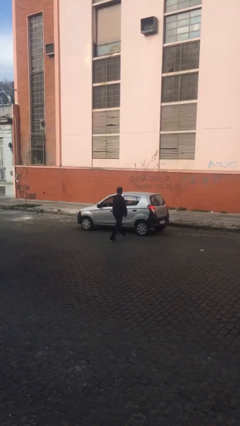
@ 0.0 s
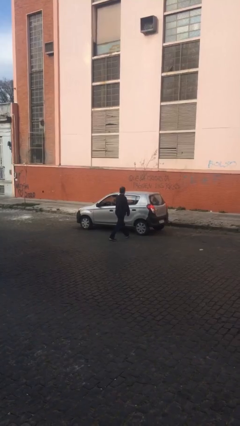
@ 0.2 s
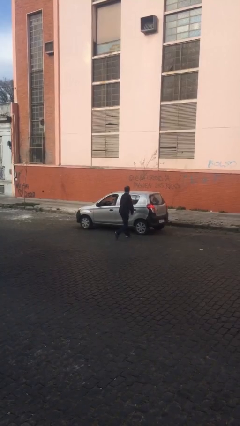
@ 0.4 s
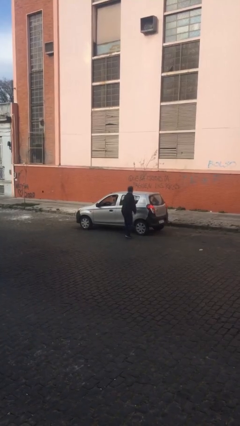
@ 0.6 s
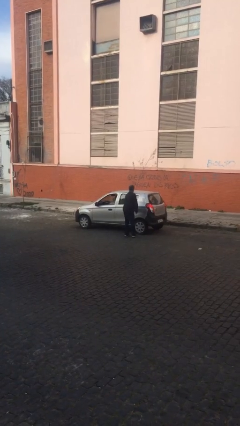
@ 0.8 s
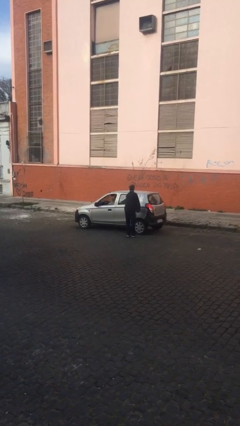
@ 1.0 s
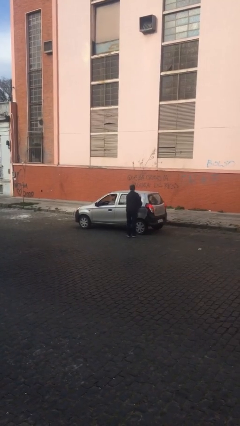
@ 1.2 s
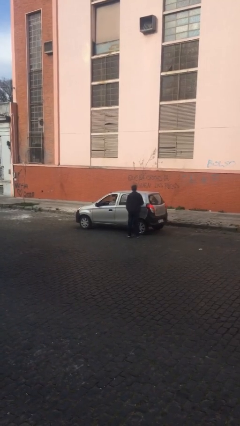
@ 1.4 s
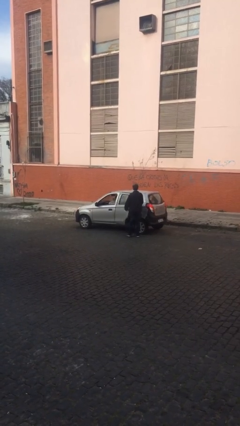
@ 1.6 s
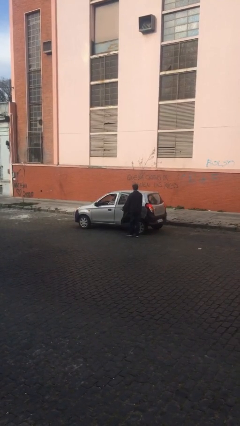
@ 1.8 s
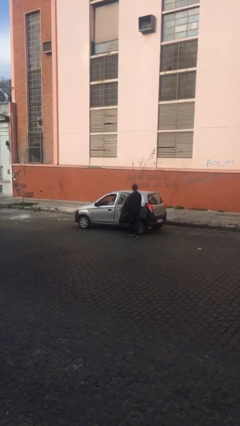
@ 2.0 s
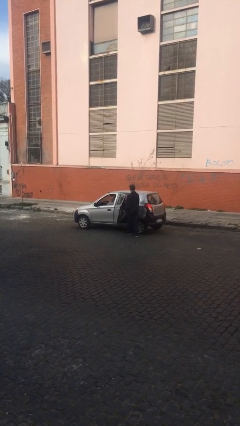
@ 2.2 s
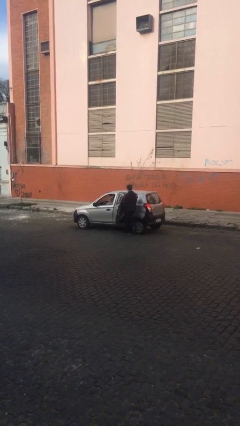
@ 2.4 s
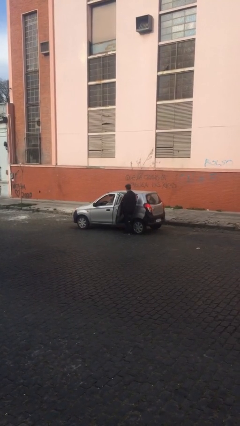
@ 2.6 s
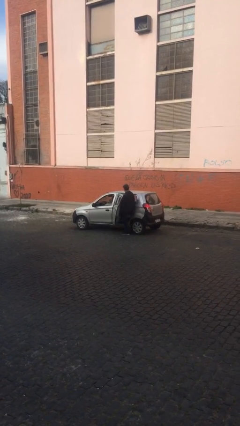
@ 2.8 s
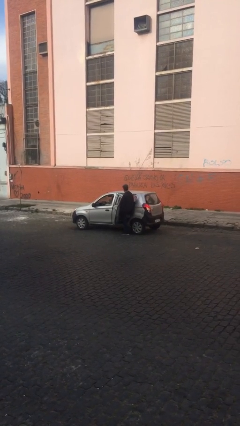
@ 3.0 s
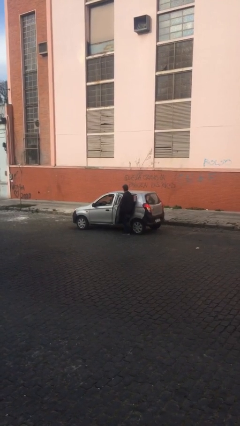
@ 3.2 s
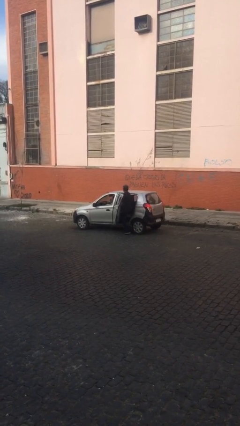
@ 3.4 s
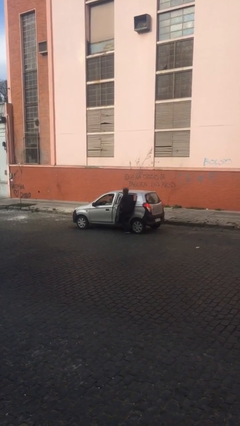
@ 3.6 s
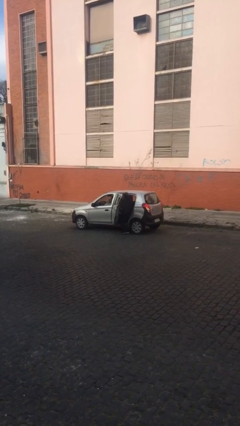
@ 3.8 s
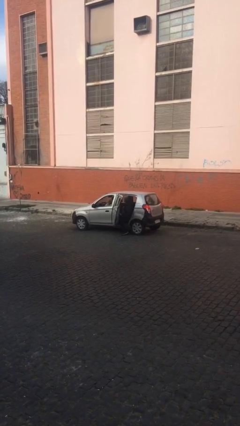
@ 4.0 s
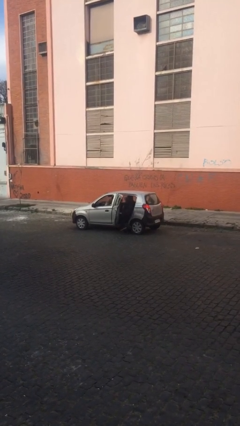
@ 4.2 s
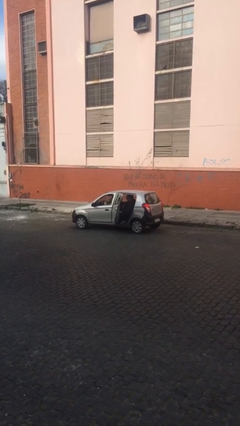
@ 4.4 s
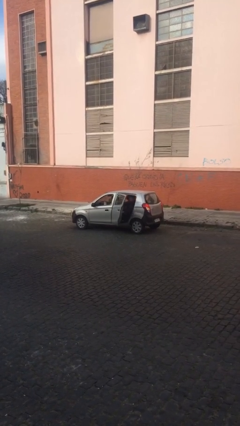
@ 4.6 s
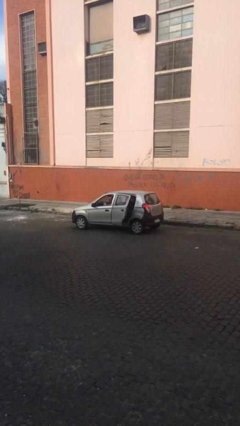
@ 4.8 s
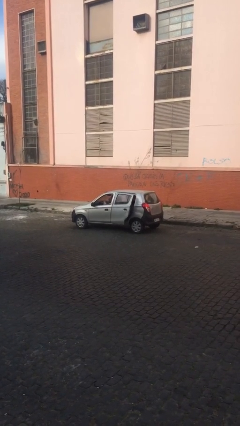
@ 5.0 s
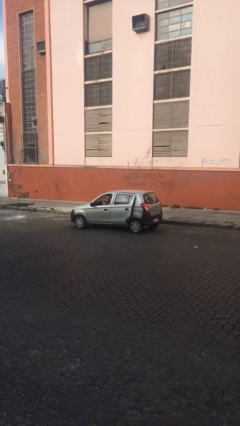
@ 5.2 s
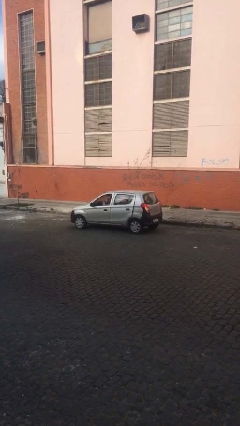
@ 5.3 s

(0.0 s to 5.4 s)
car picks up person

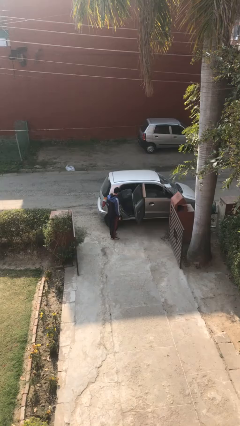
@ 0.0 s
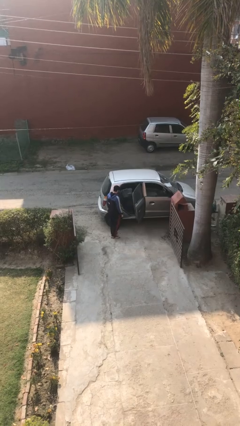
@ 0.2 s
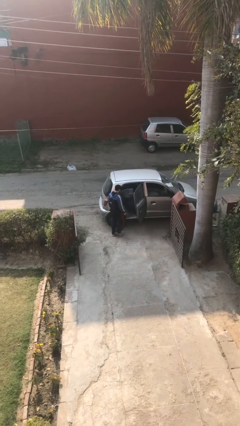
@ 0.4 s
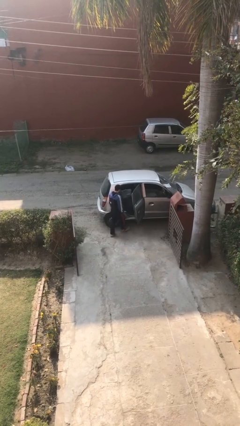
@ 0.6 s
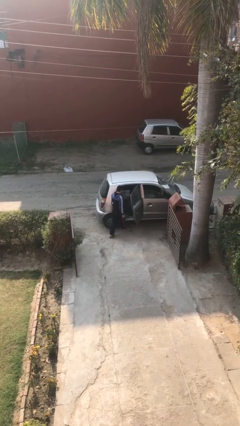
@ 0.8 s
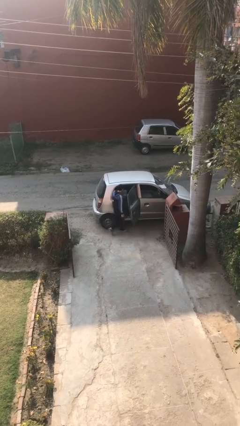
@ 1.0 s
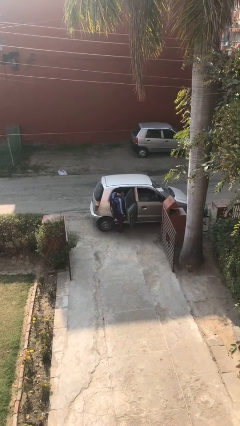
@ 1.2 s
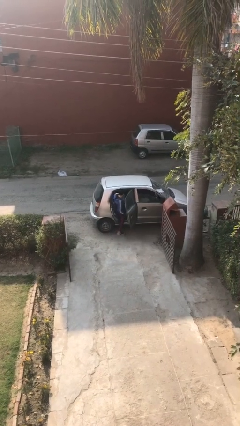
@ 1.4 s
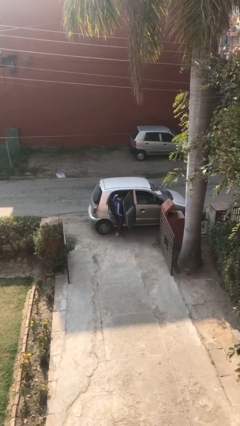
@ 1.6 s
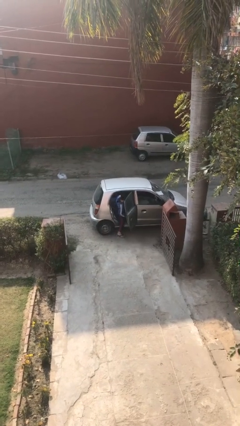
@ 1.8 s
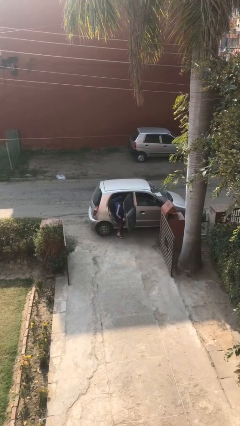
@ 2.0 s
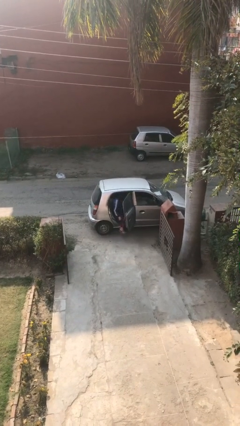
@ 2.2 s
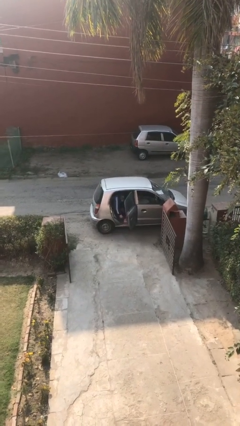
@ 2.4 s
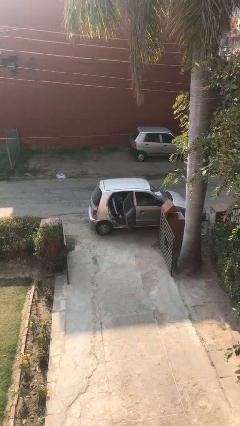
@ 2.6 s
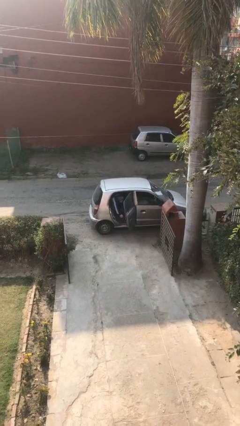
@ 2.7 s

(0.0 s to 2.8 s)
person enters car

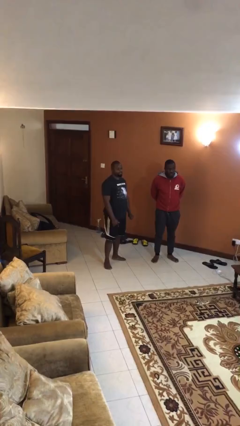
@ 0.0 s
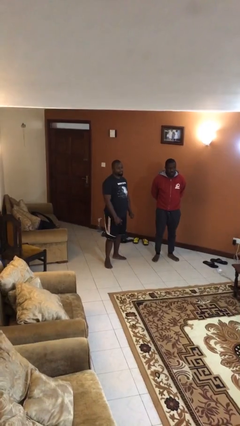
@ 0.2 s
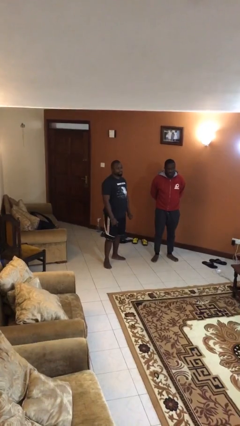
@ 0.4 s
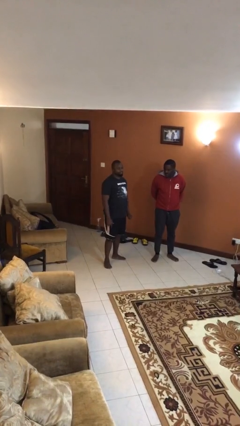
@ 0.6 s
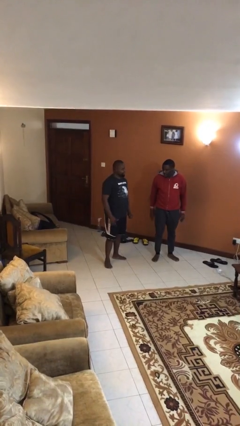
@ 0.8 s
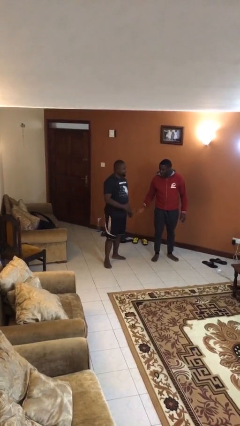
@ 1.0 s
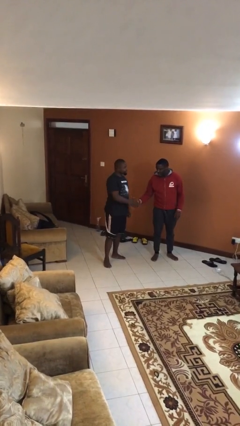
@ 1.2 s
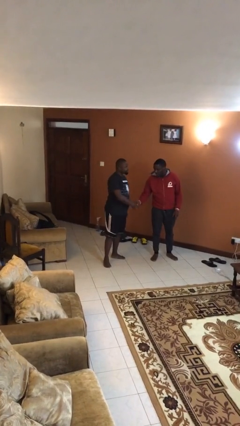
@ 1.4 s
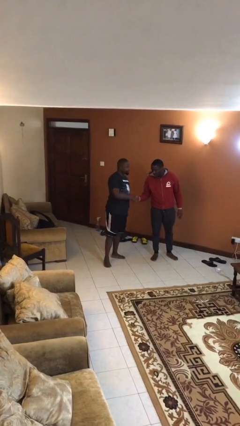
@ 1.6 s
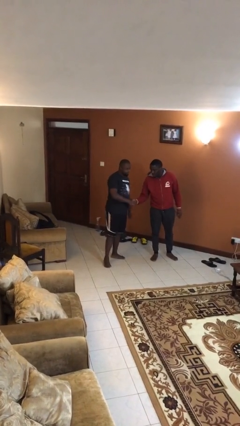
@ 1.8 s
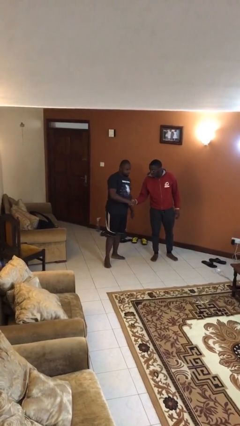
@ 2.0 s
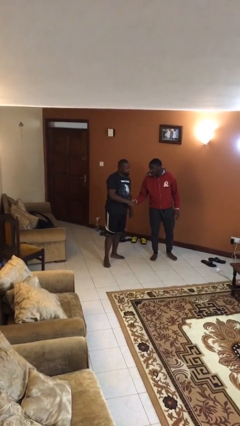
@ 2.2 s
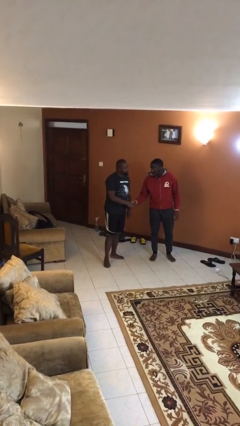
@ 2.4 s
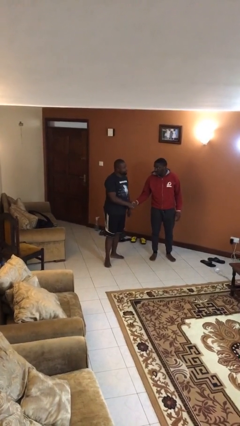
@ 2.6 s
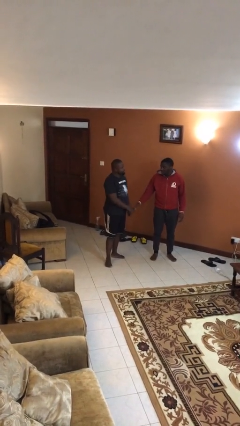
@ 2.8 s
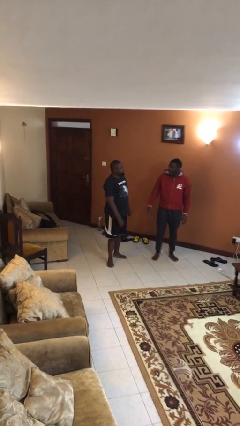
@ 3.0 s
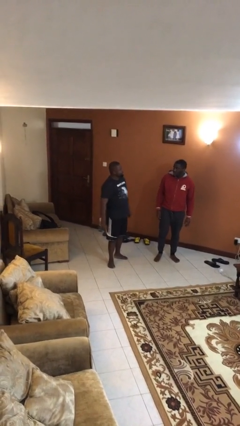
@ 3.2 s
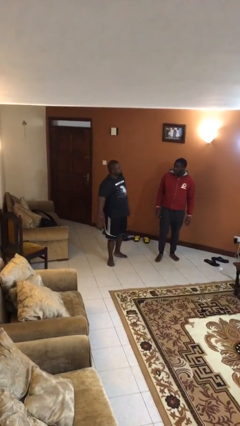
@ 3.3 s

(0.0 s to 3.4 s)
person shakes hand

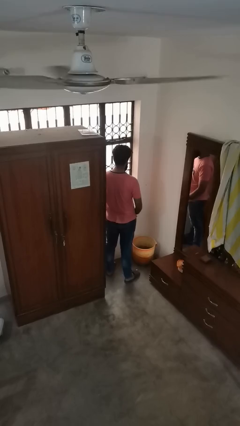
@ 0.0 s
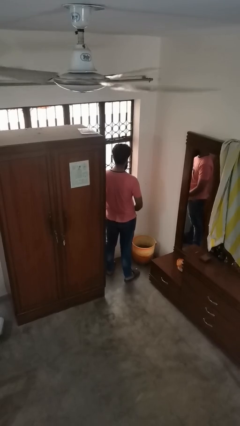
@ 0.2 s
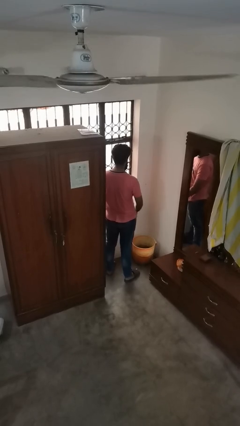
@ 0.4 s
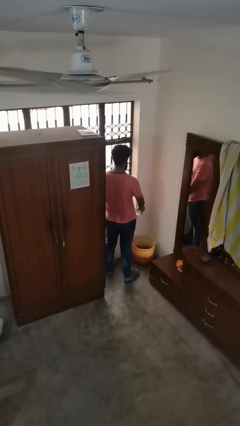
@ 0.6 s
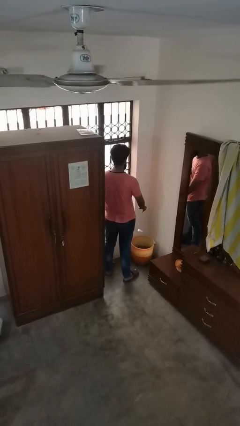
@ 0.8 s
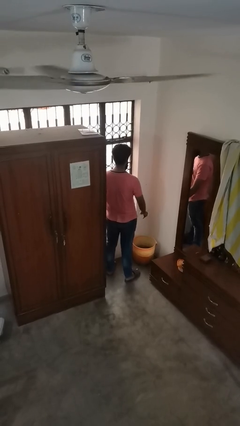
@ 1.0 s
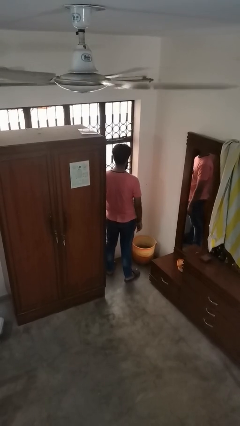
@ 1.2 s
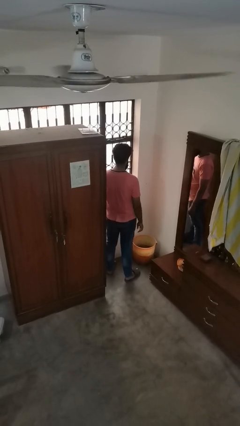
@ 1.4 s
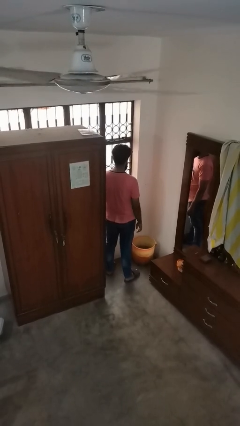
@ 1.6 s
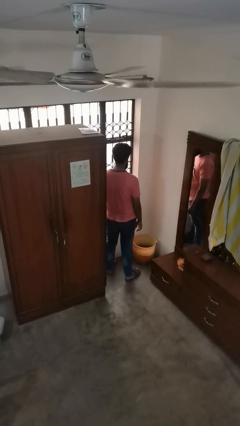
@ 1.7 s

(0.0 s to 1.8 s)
person discards trash

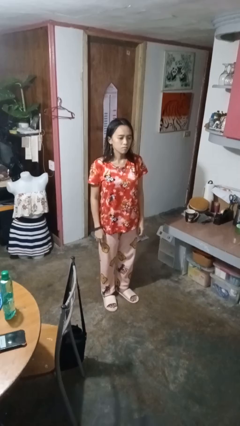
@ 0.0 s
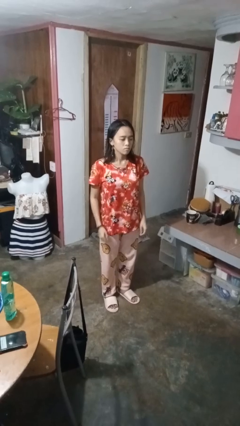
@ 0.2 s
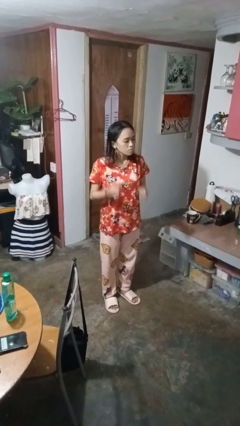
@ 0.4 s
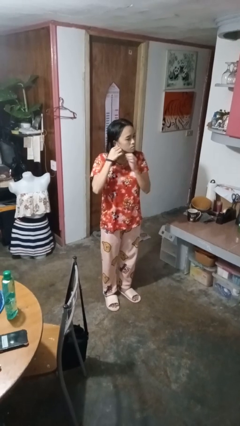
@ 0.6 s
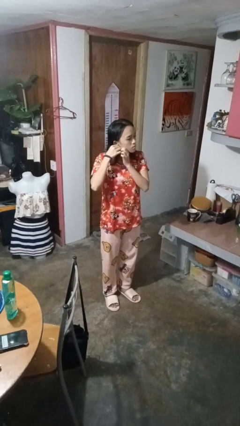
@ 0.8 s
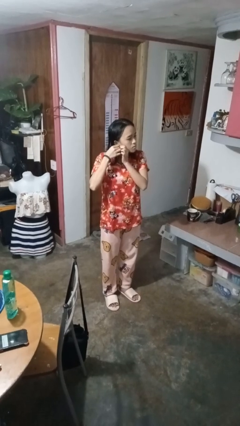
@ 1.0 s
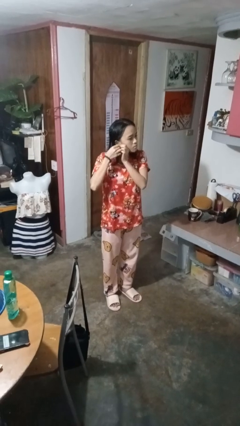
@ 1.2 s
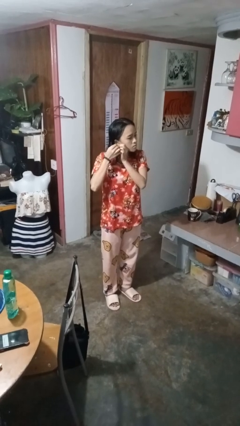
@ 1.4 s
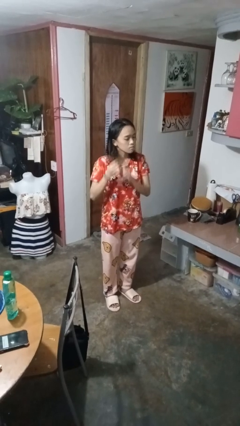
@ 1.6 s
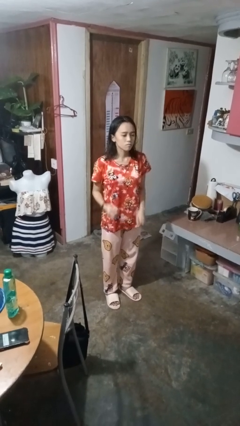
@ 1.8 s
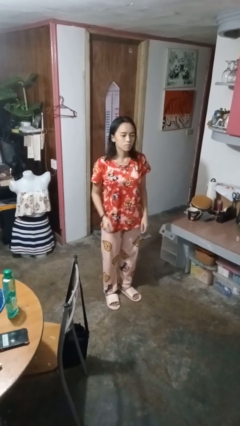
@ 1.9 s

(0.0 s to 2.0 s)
person takes off earrings

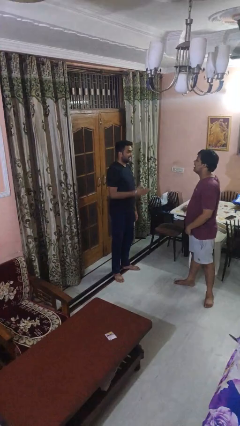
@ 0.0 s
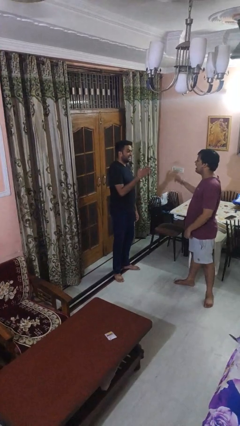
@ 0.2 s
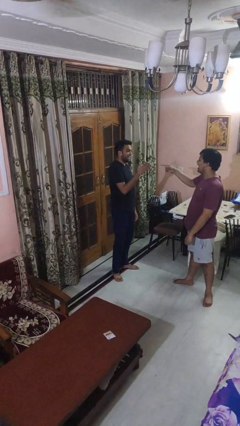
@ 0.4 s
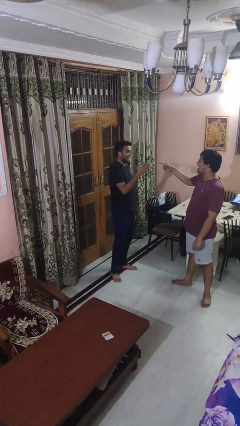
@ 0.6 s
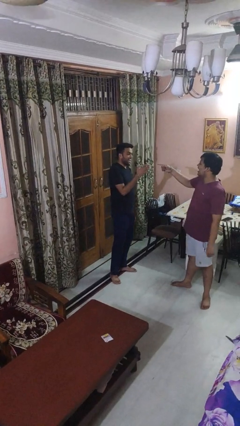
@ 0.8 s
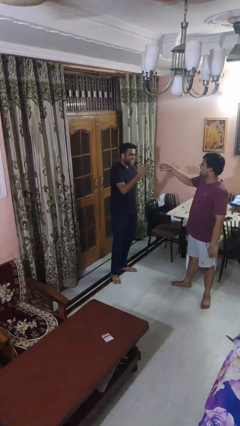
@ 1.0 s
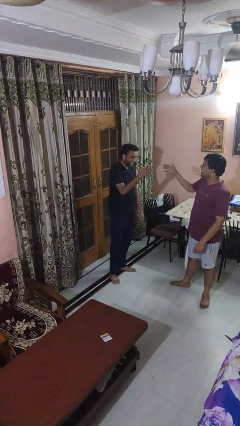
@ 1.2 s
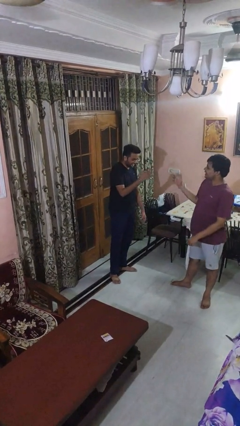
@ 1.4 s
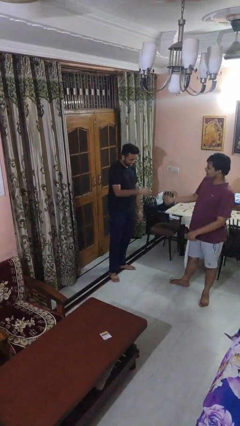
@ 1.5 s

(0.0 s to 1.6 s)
person laughs with person

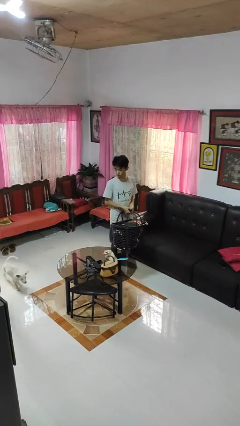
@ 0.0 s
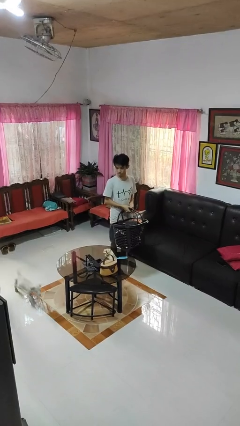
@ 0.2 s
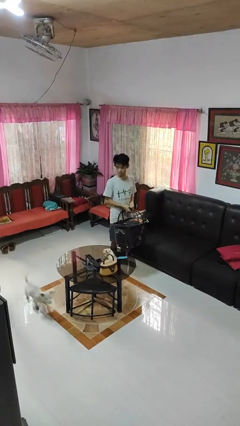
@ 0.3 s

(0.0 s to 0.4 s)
person carries laundry basket
